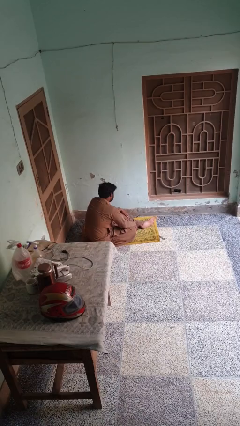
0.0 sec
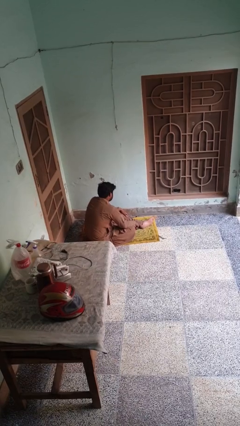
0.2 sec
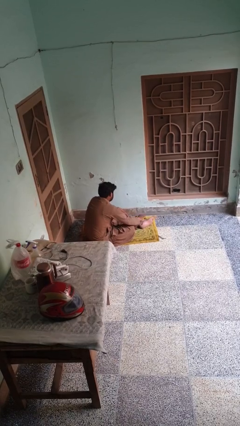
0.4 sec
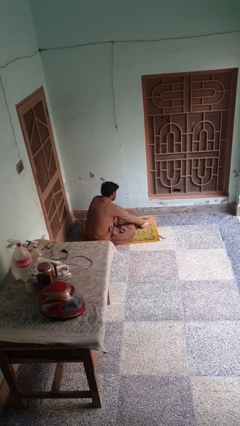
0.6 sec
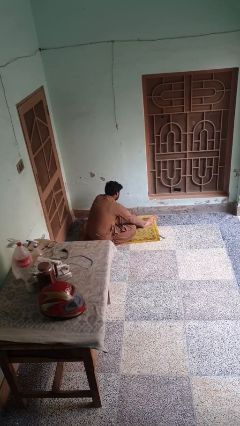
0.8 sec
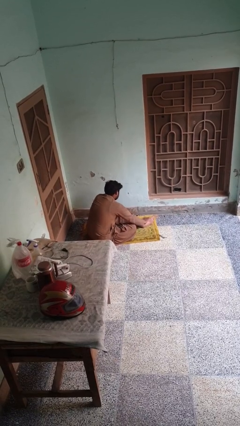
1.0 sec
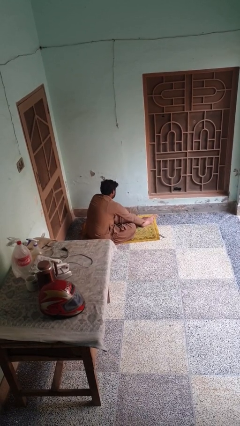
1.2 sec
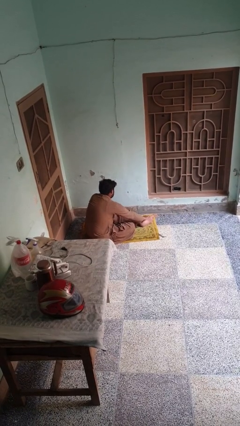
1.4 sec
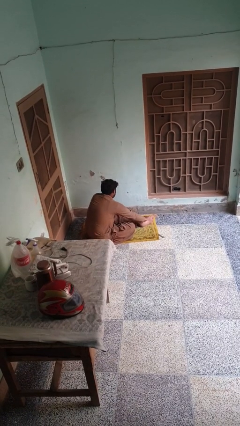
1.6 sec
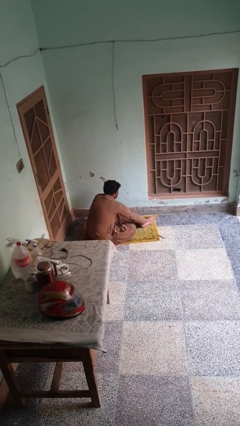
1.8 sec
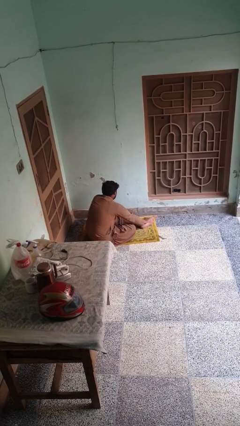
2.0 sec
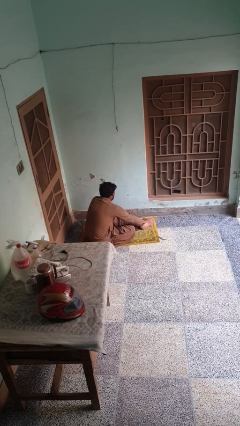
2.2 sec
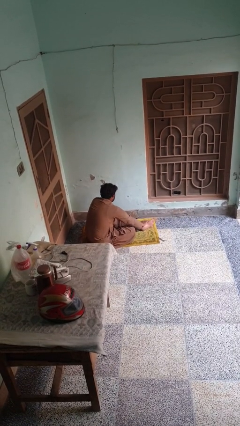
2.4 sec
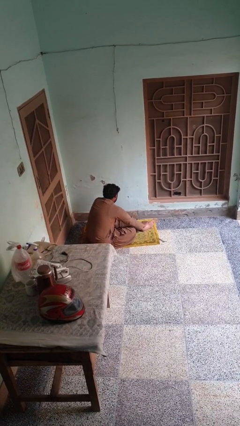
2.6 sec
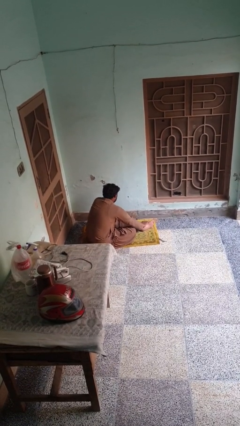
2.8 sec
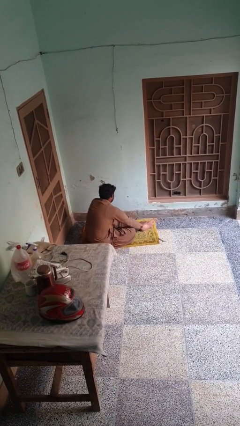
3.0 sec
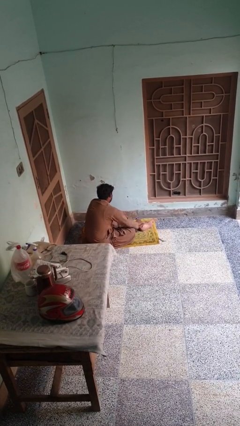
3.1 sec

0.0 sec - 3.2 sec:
person rubs foot

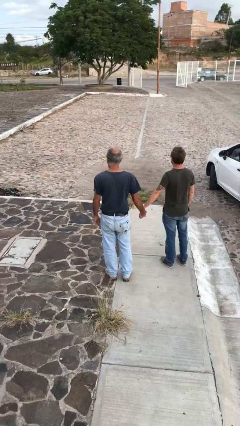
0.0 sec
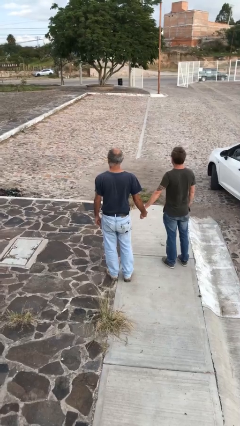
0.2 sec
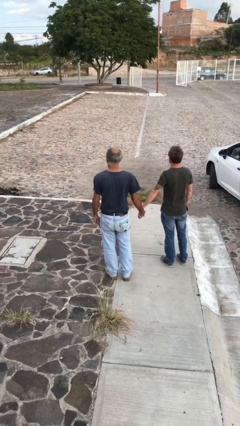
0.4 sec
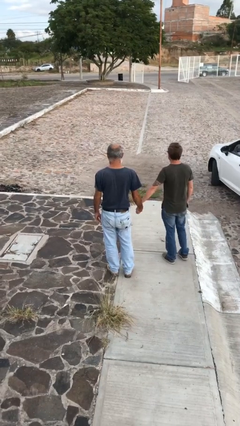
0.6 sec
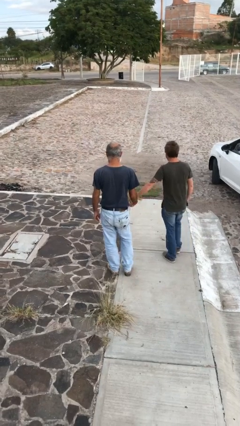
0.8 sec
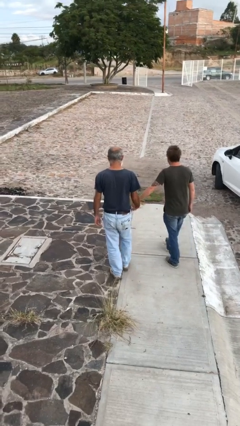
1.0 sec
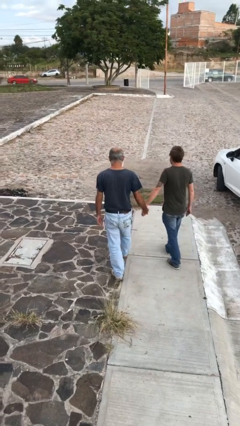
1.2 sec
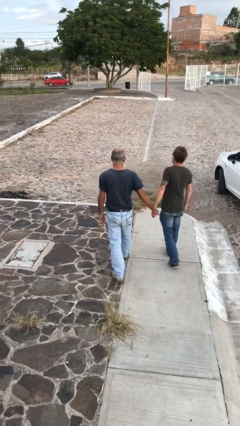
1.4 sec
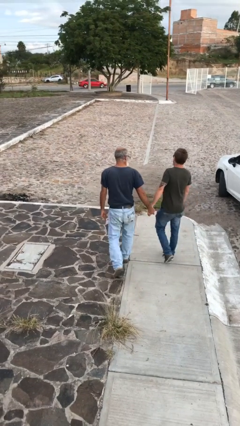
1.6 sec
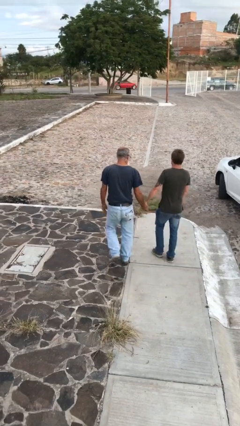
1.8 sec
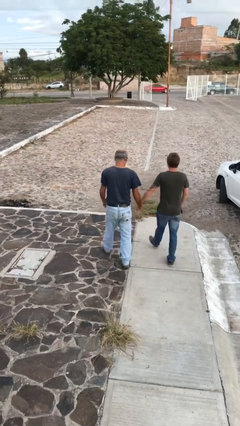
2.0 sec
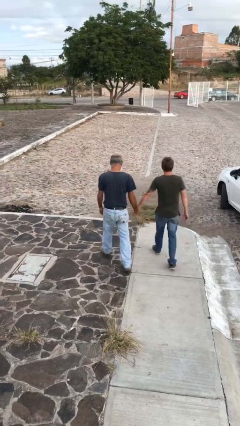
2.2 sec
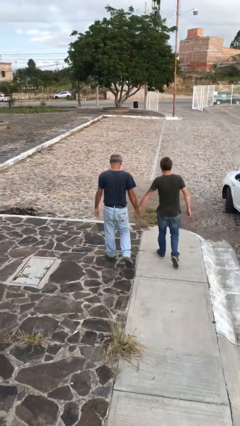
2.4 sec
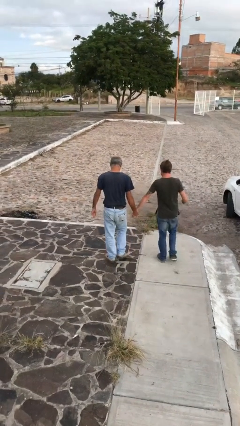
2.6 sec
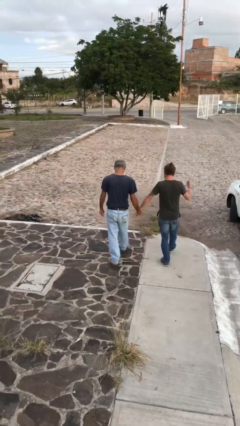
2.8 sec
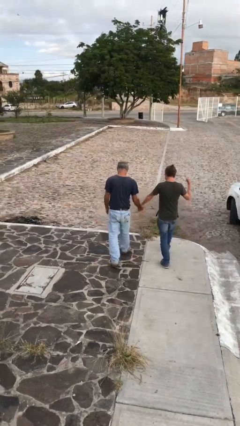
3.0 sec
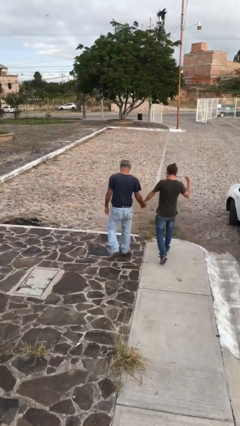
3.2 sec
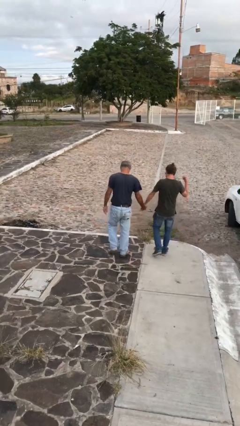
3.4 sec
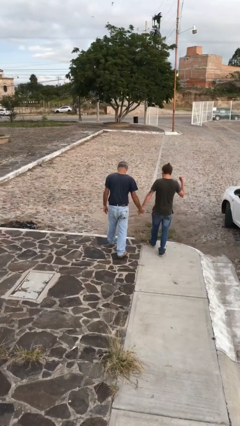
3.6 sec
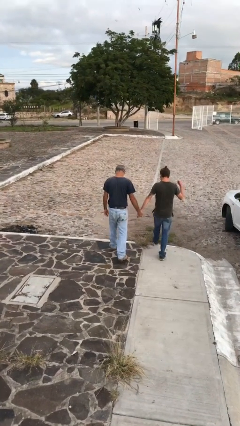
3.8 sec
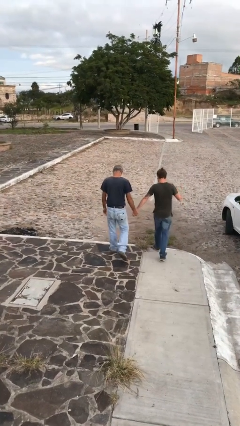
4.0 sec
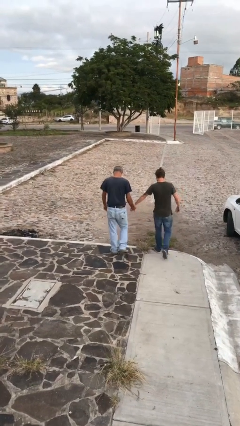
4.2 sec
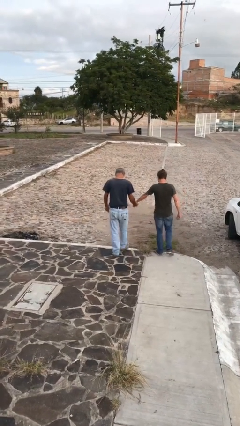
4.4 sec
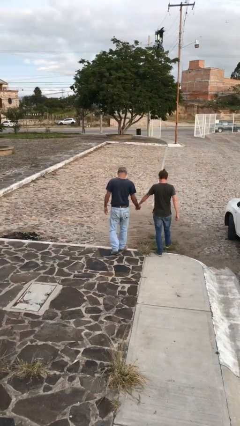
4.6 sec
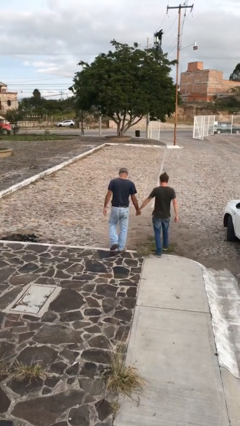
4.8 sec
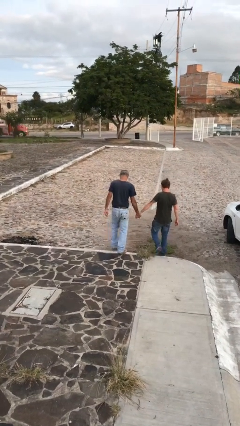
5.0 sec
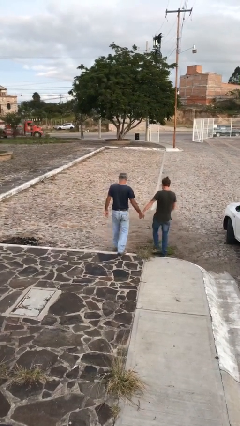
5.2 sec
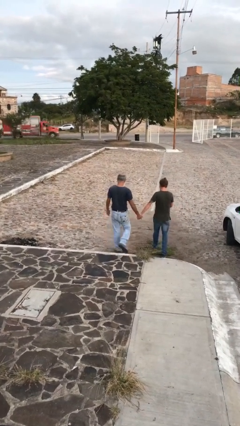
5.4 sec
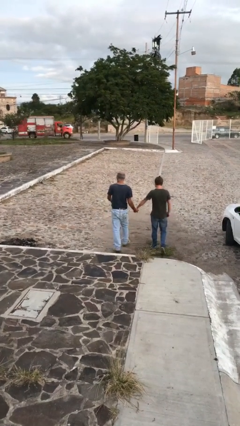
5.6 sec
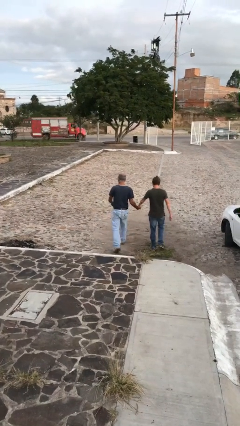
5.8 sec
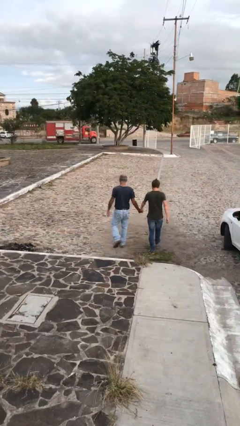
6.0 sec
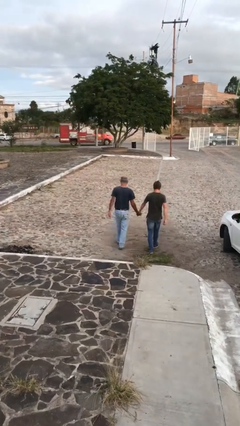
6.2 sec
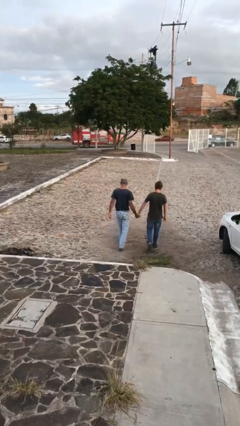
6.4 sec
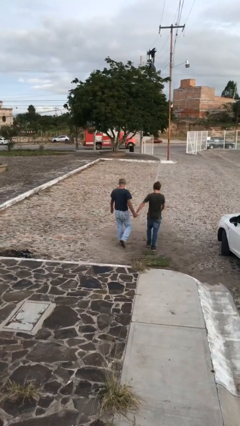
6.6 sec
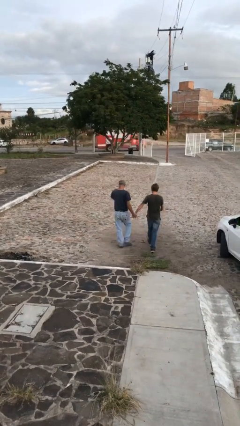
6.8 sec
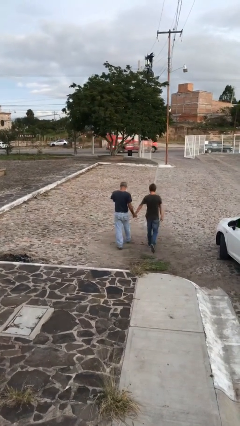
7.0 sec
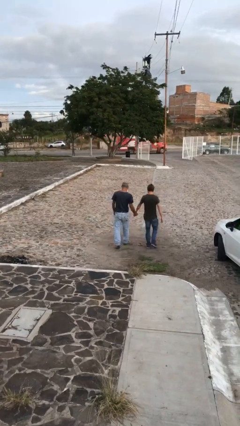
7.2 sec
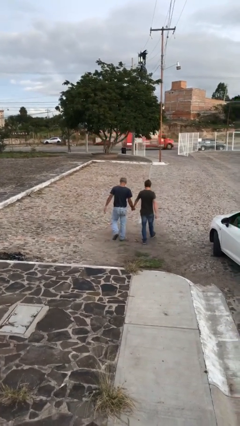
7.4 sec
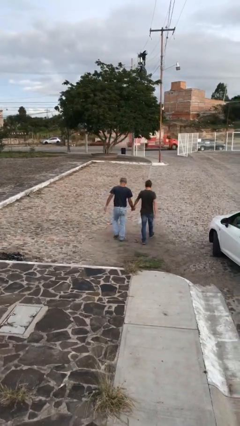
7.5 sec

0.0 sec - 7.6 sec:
person holds hand

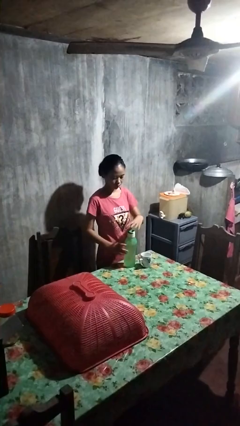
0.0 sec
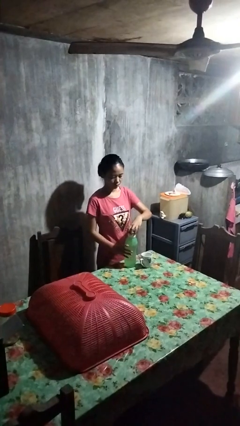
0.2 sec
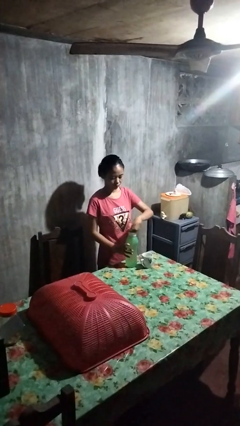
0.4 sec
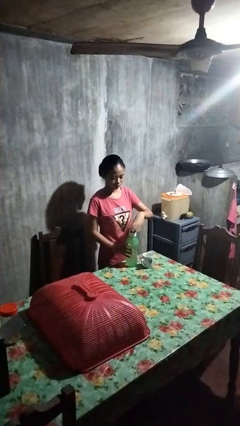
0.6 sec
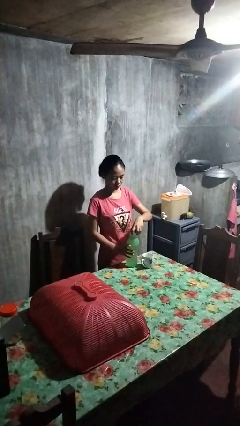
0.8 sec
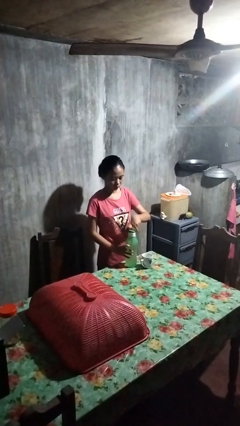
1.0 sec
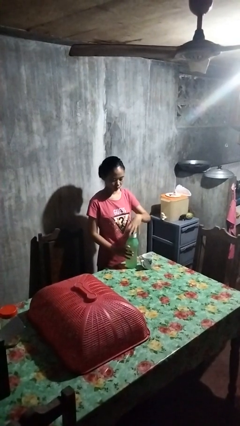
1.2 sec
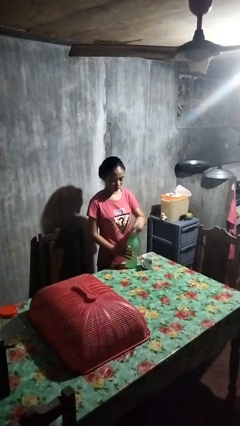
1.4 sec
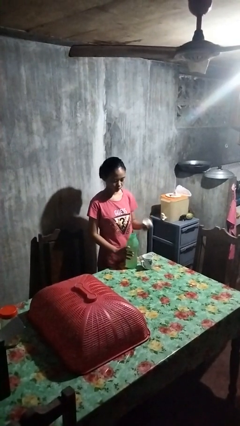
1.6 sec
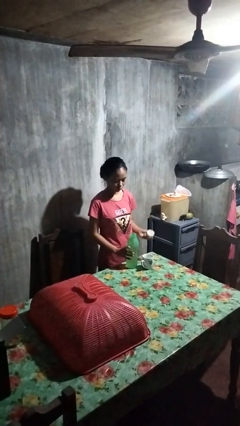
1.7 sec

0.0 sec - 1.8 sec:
person unscrews lid from bottle

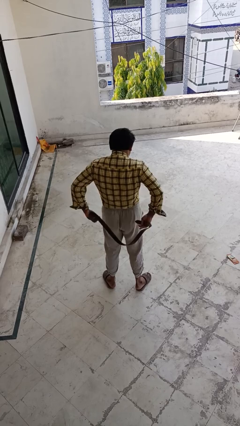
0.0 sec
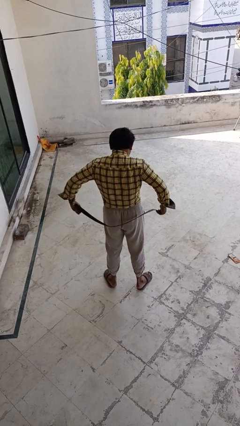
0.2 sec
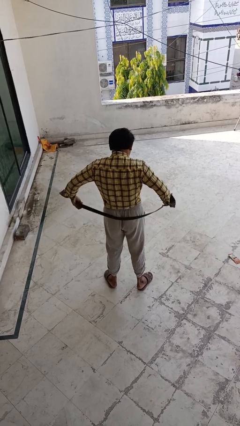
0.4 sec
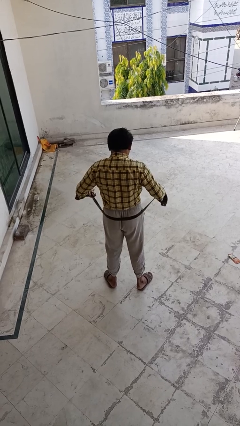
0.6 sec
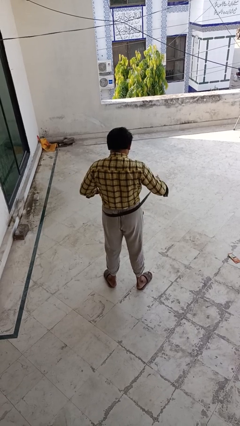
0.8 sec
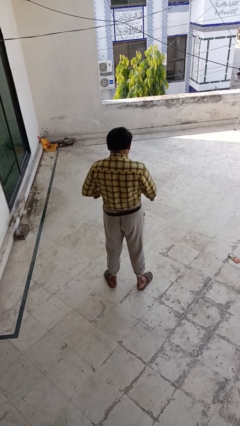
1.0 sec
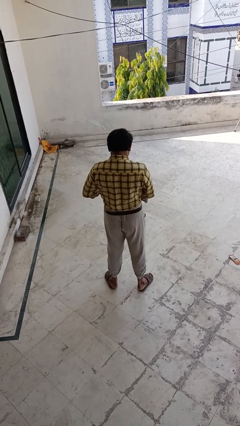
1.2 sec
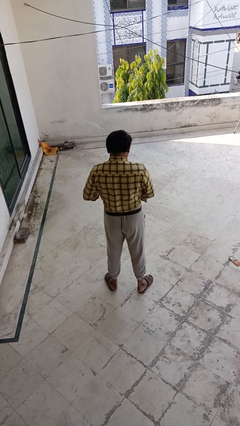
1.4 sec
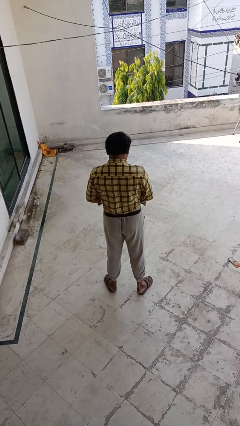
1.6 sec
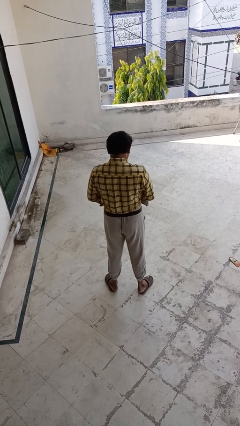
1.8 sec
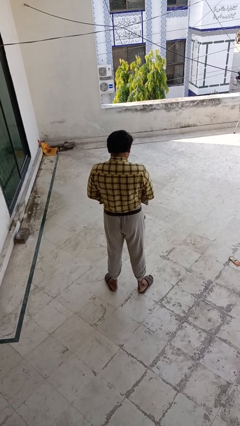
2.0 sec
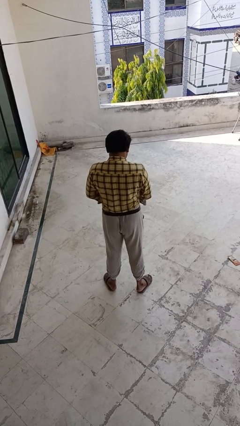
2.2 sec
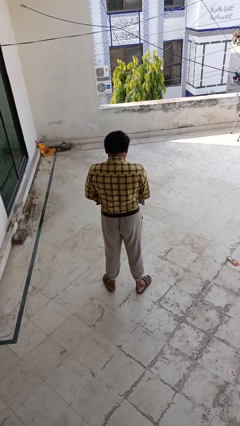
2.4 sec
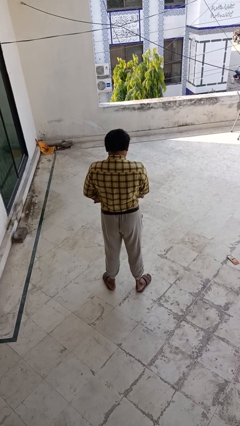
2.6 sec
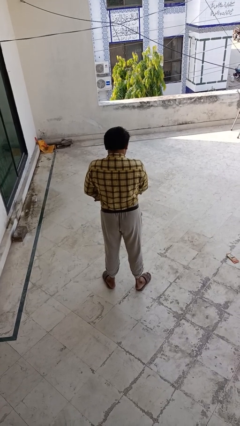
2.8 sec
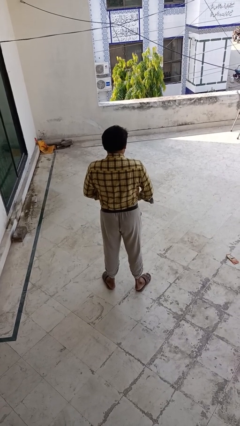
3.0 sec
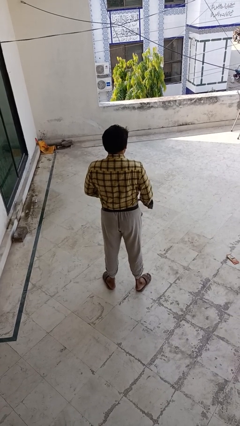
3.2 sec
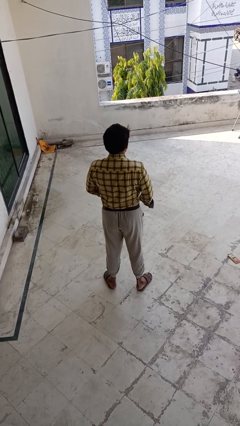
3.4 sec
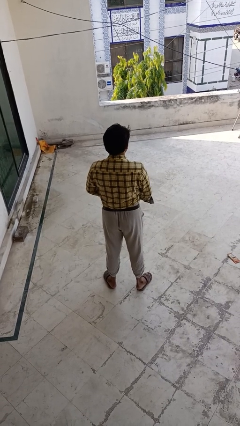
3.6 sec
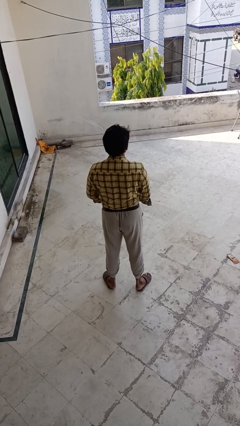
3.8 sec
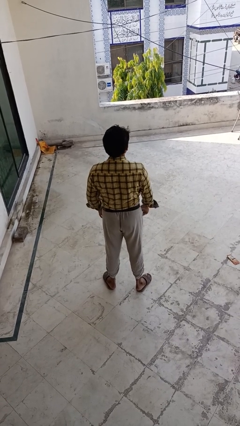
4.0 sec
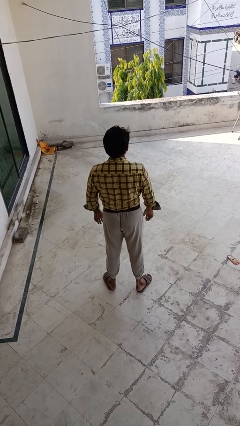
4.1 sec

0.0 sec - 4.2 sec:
person puts on belt

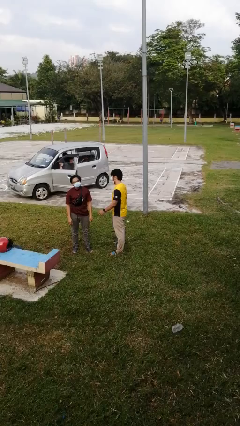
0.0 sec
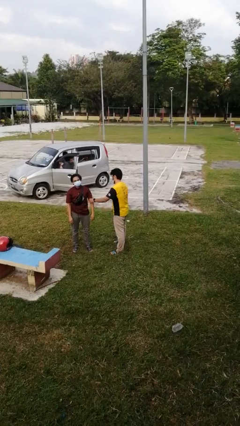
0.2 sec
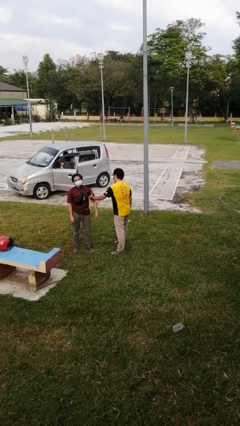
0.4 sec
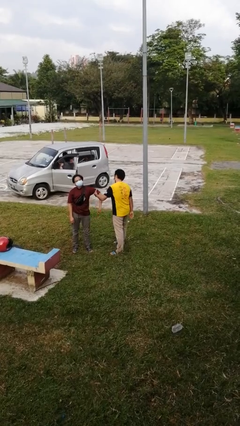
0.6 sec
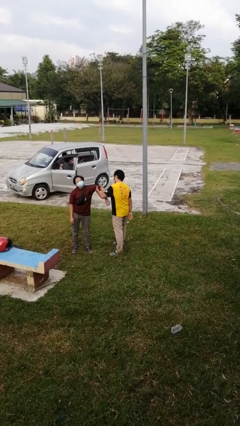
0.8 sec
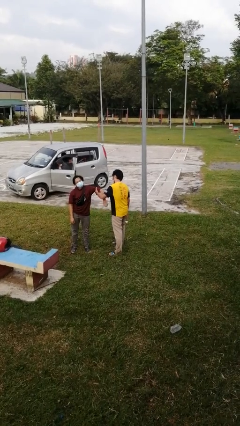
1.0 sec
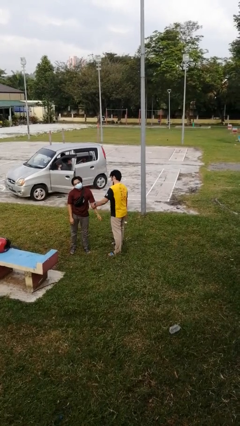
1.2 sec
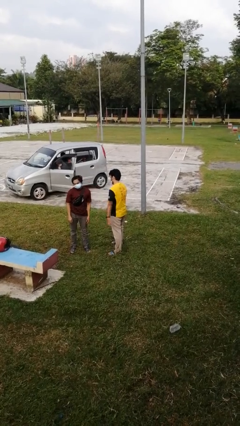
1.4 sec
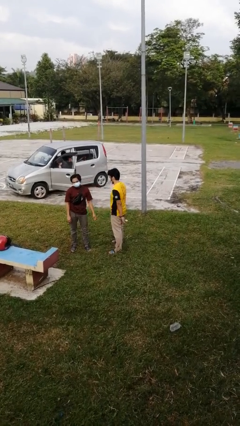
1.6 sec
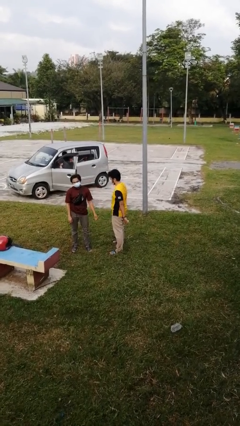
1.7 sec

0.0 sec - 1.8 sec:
person grabs person by bicep
